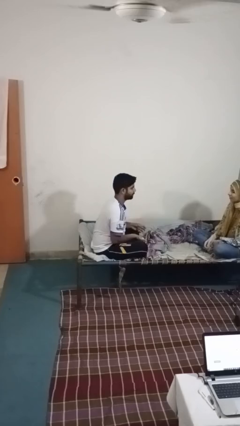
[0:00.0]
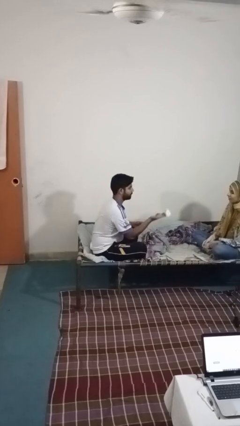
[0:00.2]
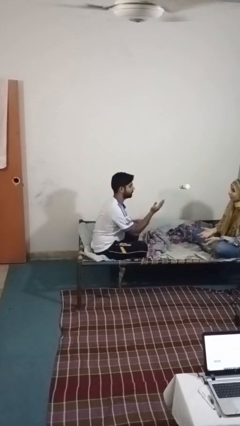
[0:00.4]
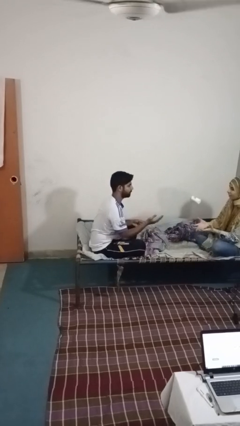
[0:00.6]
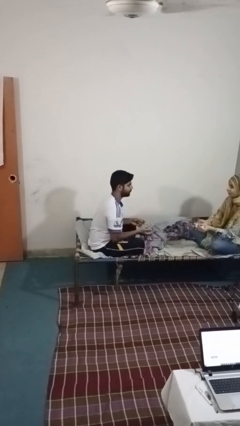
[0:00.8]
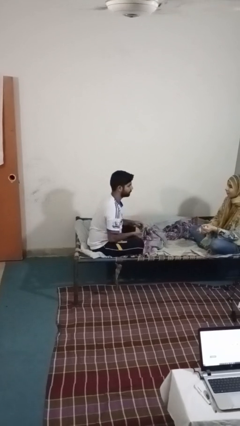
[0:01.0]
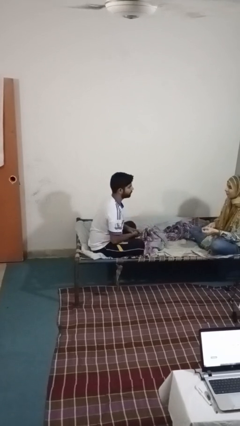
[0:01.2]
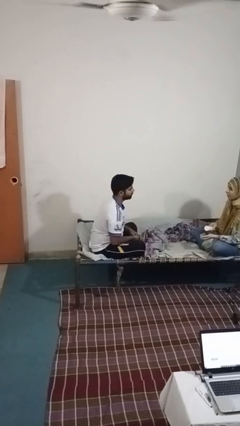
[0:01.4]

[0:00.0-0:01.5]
person throws object to person

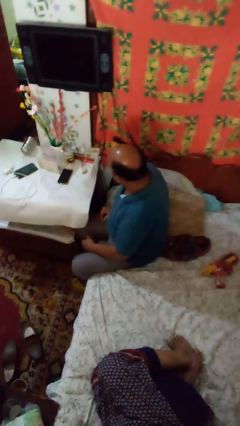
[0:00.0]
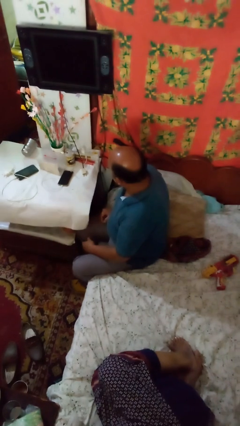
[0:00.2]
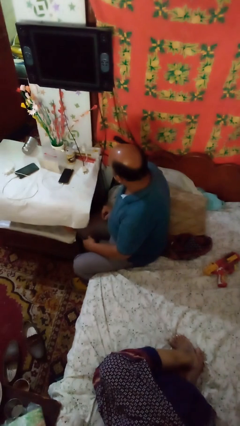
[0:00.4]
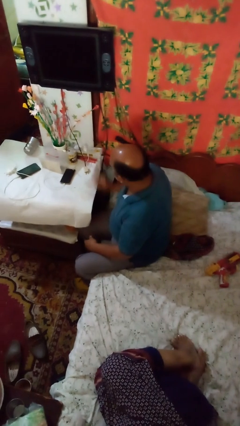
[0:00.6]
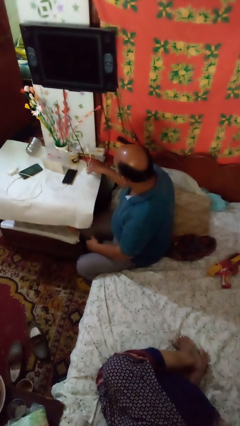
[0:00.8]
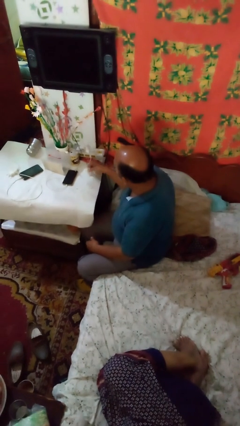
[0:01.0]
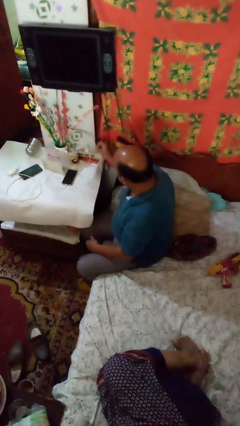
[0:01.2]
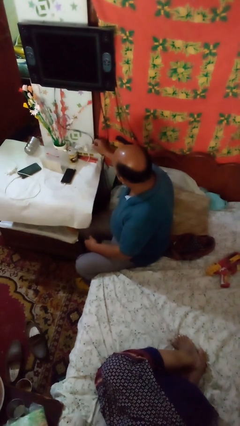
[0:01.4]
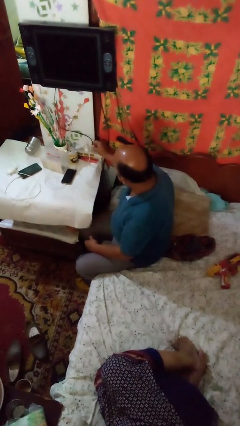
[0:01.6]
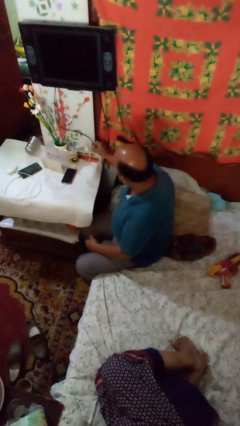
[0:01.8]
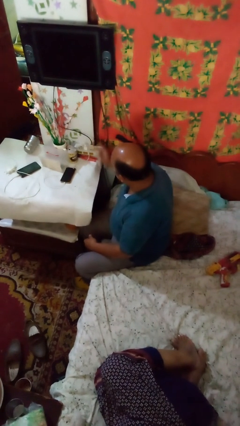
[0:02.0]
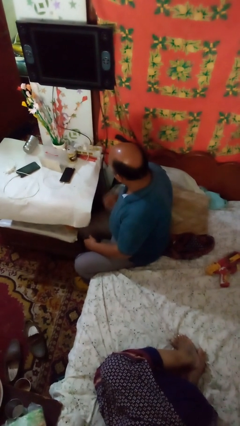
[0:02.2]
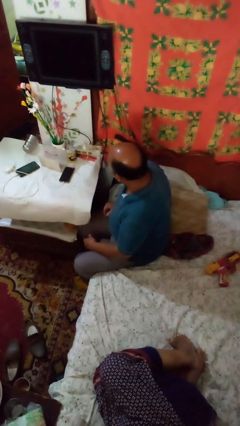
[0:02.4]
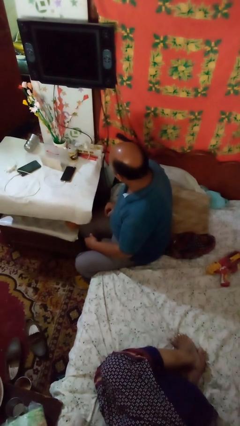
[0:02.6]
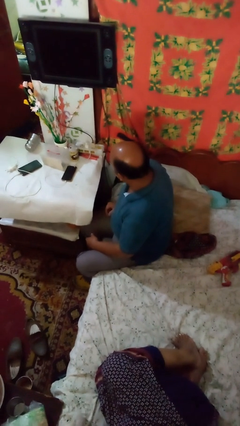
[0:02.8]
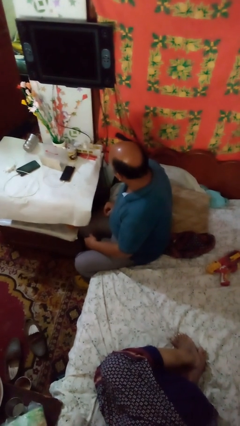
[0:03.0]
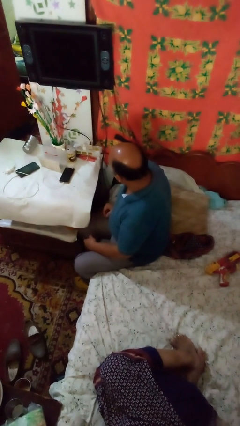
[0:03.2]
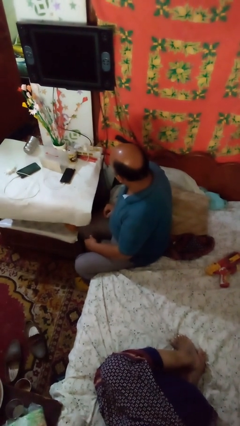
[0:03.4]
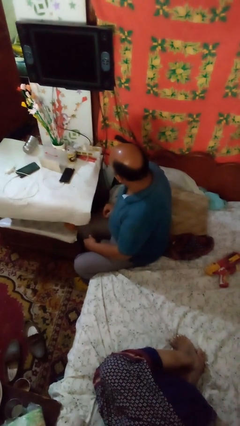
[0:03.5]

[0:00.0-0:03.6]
person plugs into electrical socket

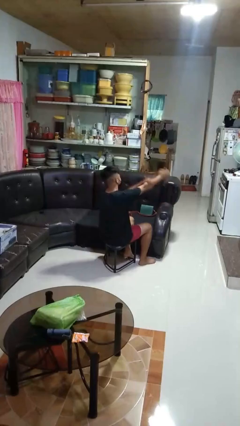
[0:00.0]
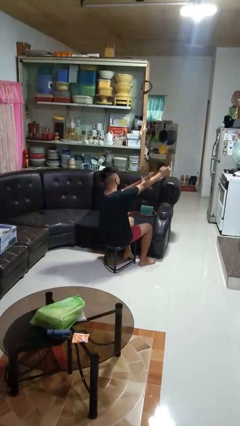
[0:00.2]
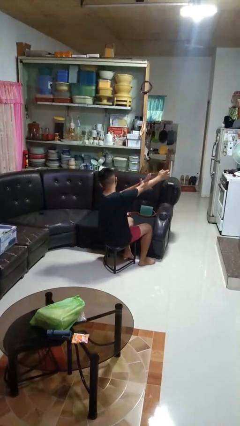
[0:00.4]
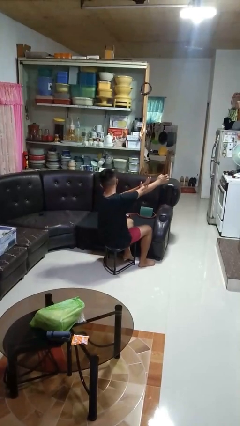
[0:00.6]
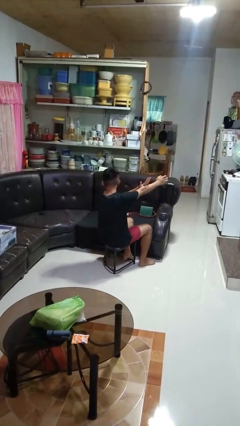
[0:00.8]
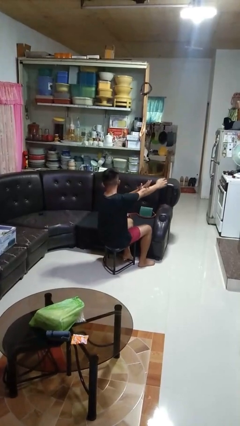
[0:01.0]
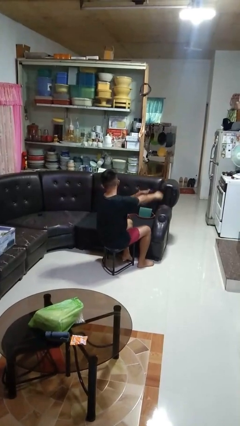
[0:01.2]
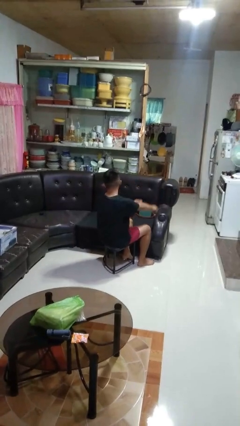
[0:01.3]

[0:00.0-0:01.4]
person swats bug

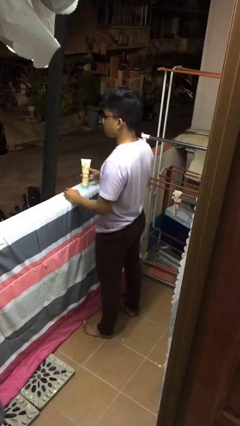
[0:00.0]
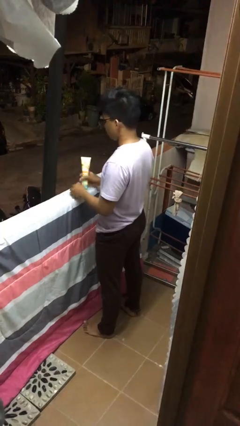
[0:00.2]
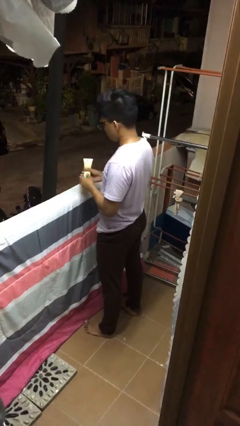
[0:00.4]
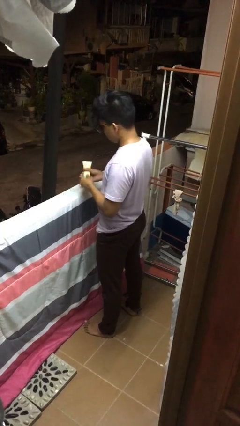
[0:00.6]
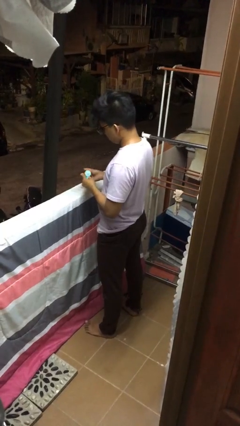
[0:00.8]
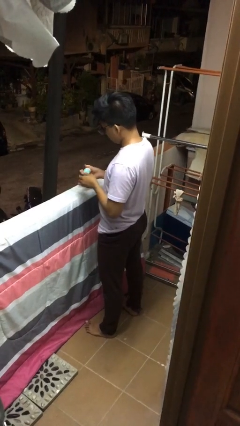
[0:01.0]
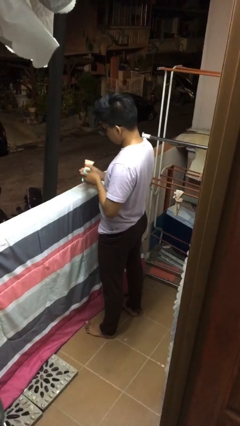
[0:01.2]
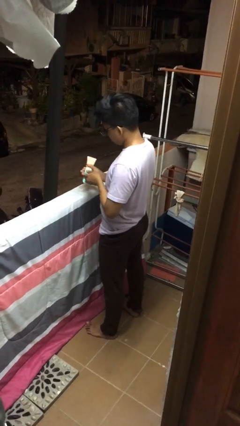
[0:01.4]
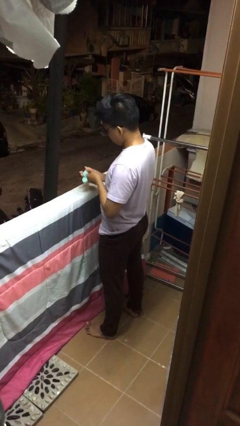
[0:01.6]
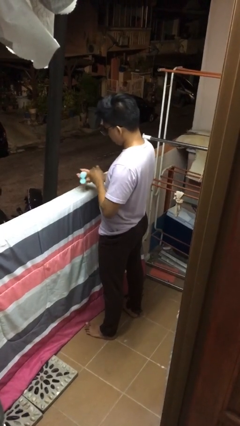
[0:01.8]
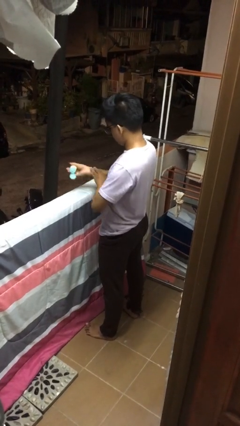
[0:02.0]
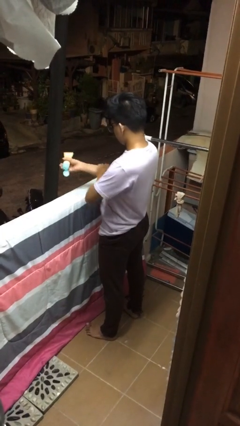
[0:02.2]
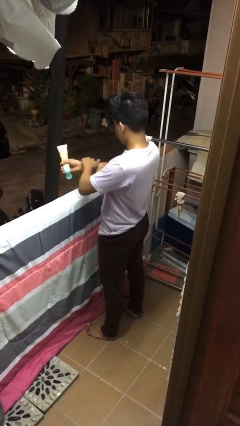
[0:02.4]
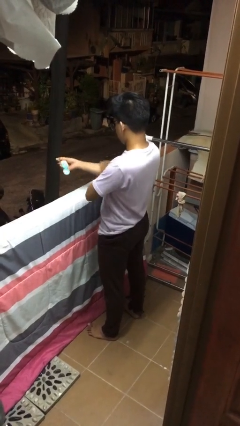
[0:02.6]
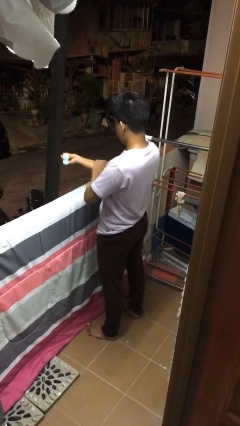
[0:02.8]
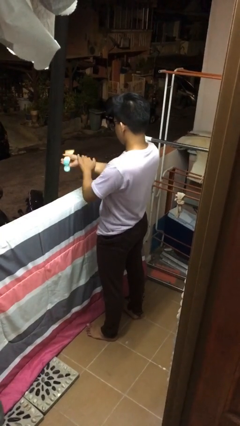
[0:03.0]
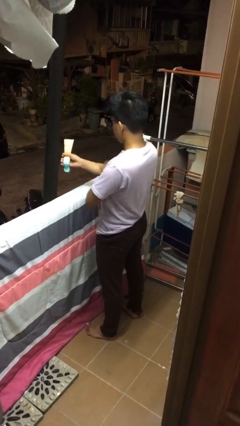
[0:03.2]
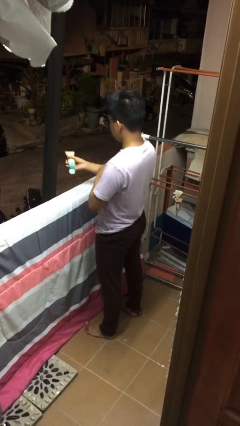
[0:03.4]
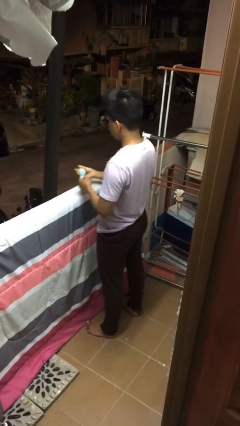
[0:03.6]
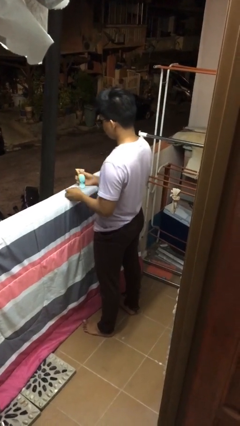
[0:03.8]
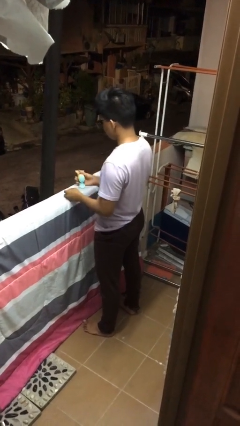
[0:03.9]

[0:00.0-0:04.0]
person applies sunscreen

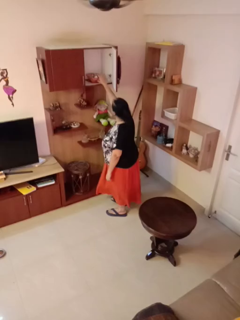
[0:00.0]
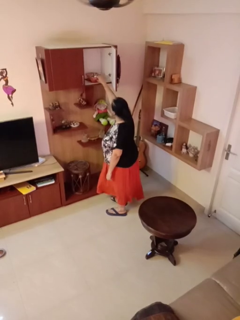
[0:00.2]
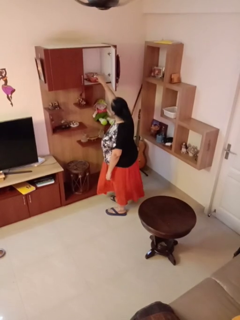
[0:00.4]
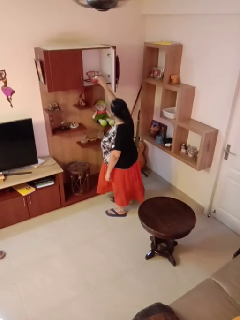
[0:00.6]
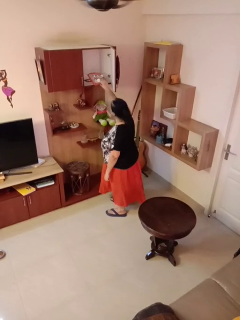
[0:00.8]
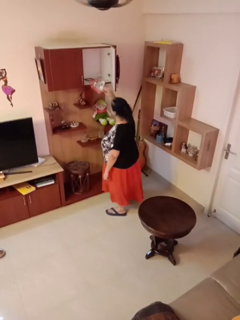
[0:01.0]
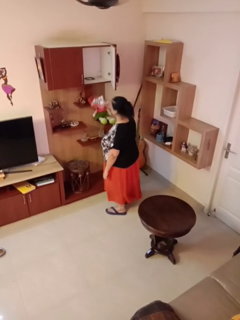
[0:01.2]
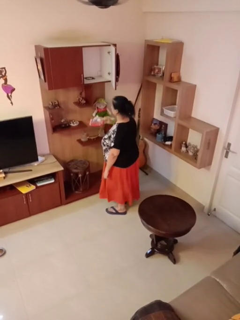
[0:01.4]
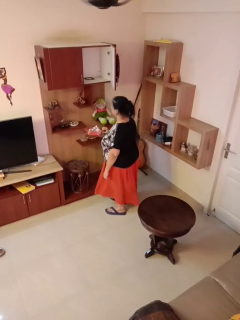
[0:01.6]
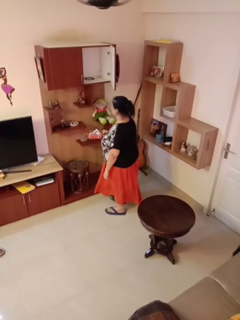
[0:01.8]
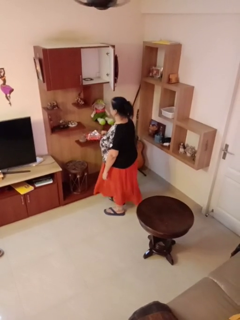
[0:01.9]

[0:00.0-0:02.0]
person picks up object from cabinet

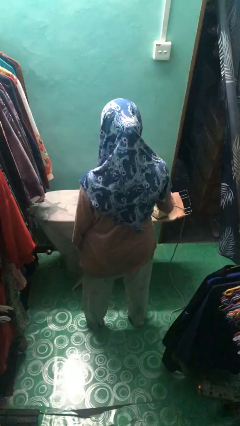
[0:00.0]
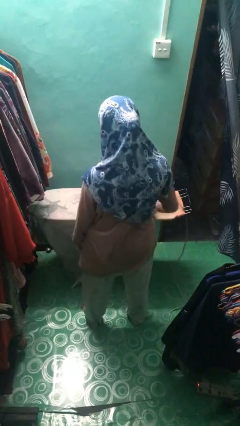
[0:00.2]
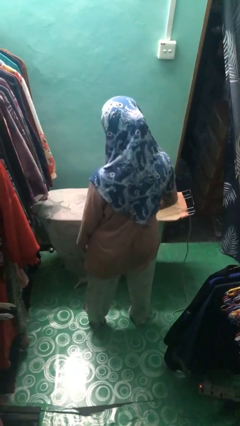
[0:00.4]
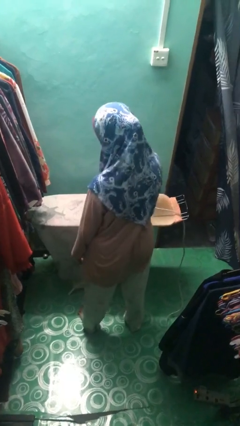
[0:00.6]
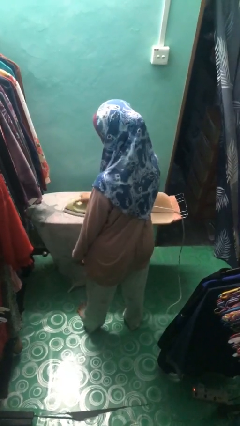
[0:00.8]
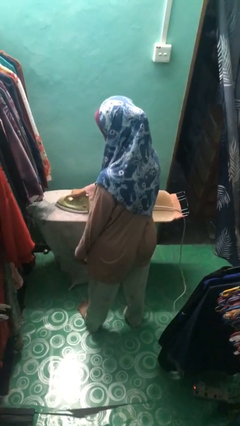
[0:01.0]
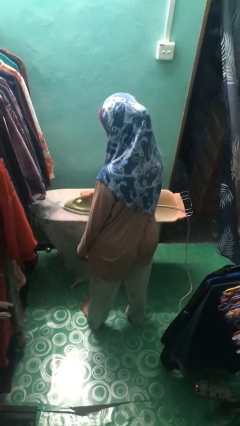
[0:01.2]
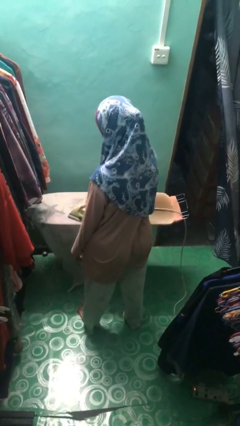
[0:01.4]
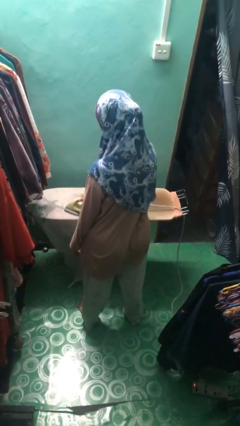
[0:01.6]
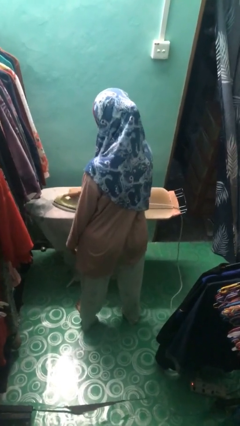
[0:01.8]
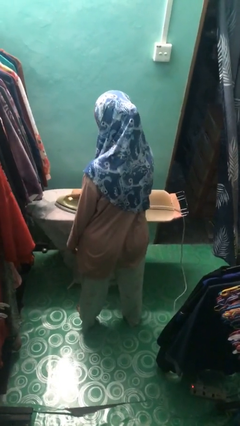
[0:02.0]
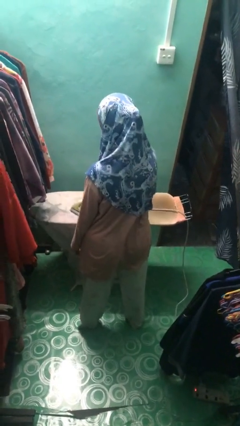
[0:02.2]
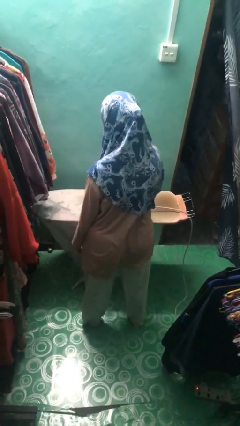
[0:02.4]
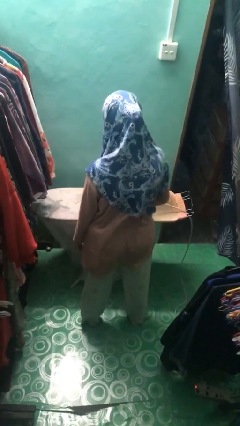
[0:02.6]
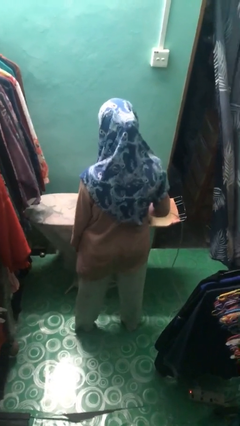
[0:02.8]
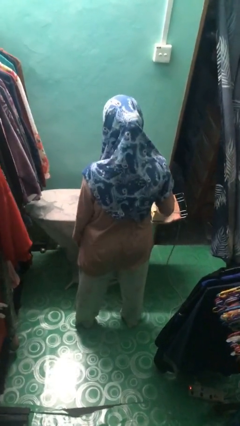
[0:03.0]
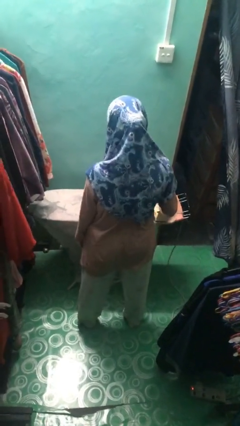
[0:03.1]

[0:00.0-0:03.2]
person irons clothes

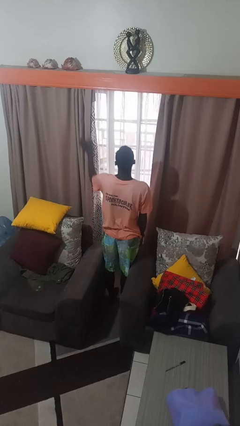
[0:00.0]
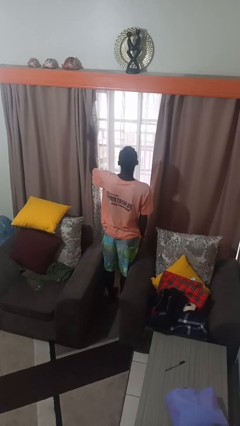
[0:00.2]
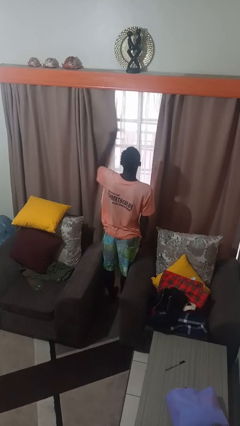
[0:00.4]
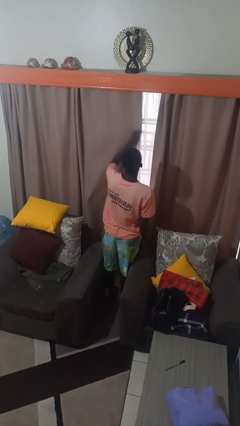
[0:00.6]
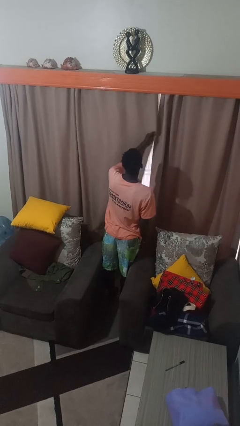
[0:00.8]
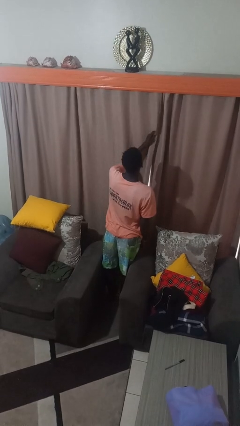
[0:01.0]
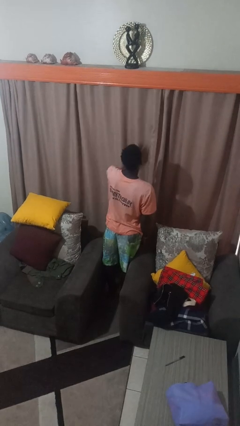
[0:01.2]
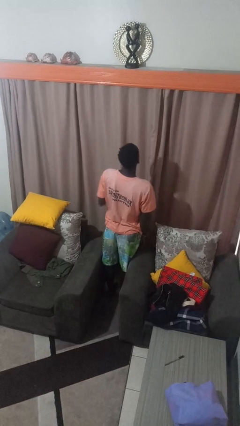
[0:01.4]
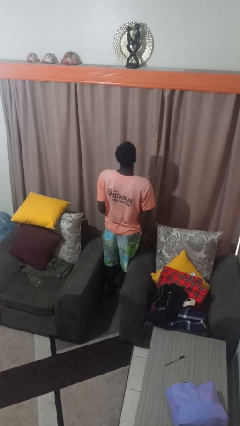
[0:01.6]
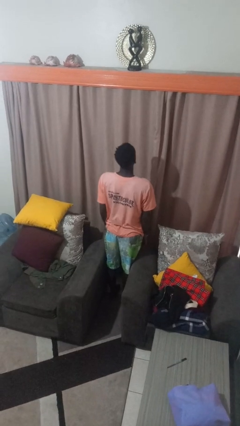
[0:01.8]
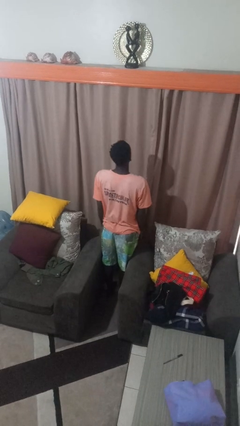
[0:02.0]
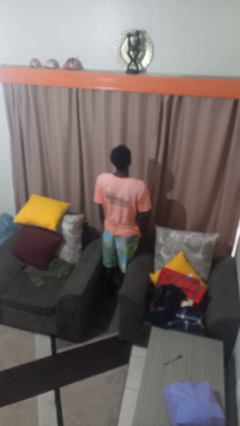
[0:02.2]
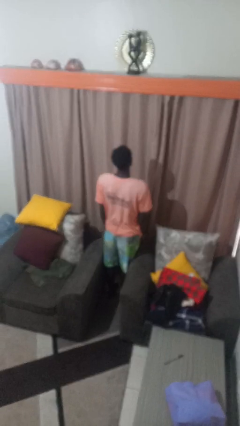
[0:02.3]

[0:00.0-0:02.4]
person closes curtains
